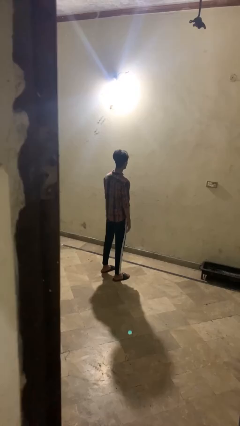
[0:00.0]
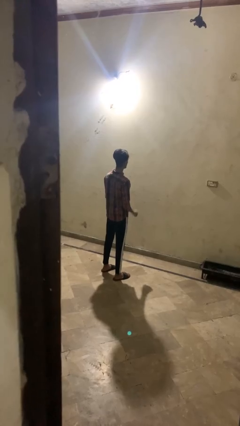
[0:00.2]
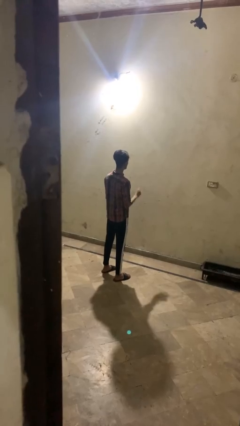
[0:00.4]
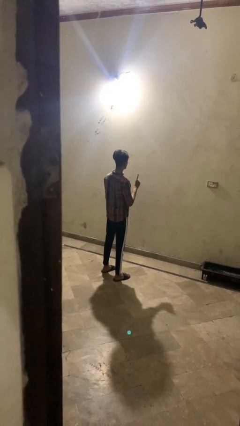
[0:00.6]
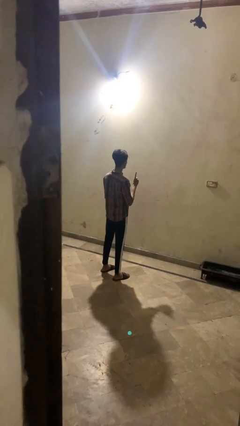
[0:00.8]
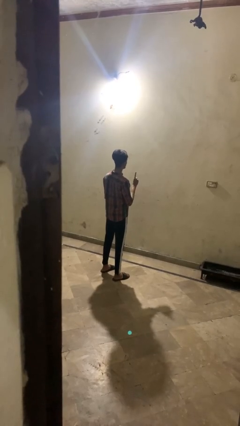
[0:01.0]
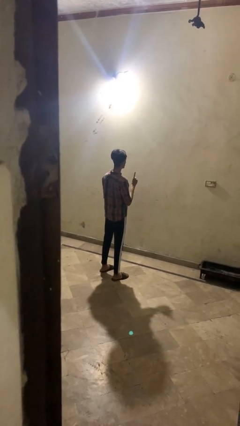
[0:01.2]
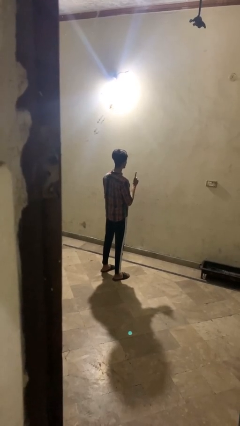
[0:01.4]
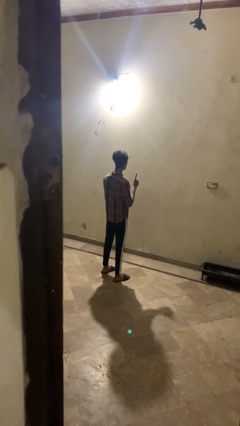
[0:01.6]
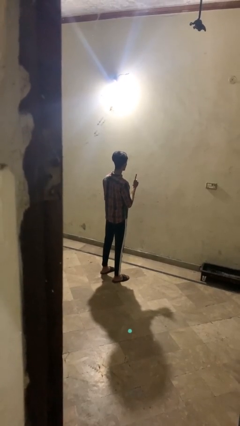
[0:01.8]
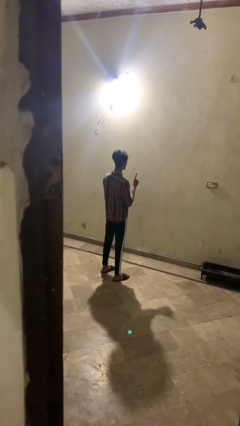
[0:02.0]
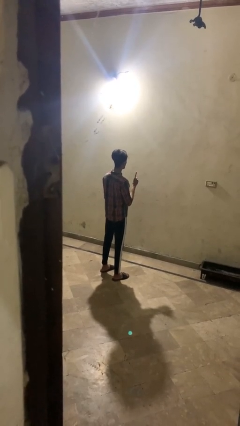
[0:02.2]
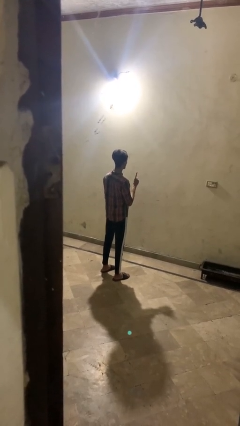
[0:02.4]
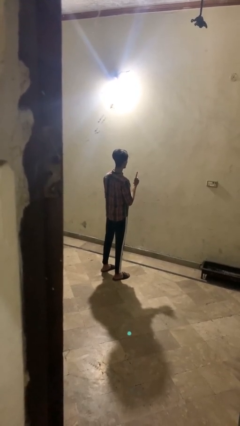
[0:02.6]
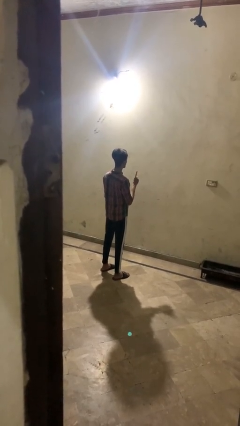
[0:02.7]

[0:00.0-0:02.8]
person gestures number one

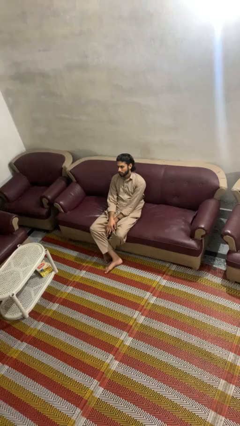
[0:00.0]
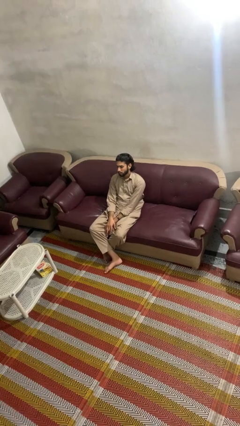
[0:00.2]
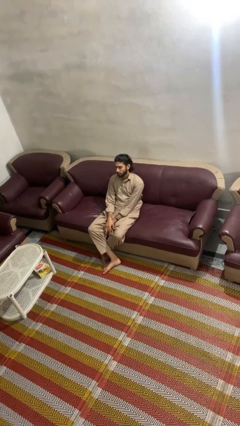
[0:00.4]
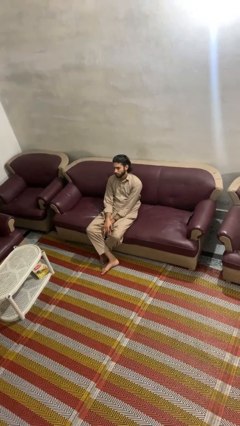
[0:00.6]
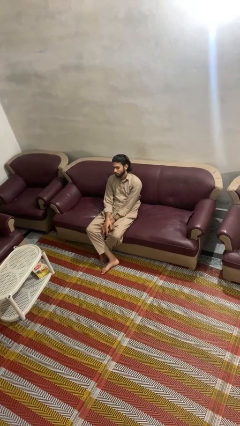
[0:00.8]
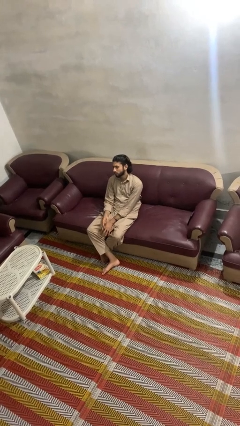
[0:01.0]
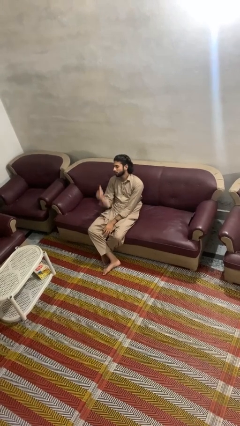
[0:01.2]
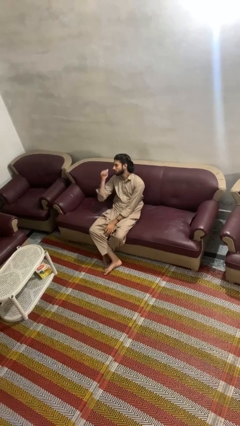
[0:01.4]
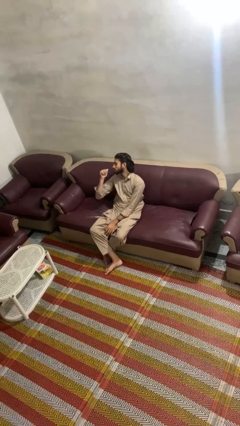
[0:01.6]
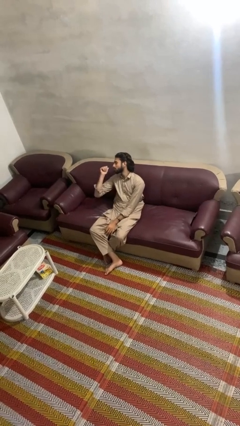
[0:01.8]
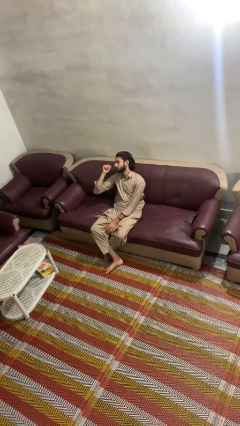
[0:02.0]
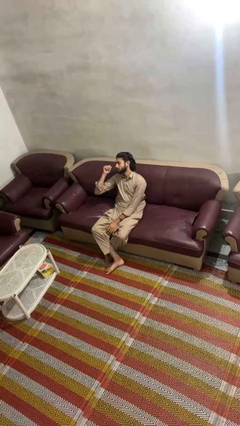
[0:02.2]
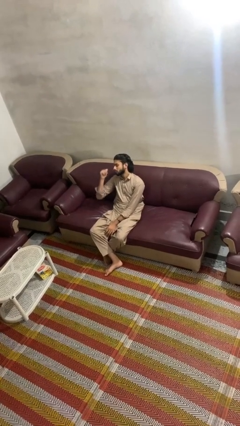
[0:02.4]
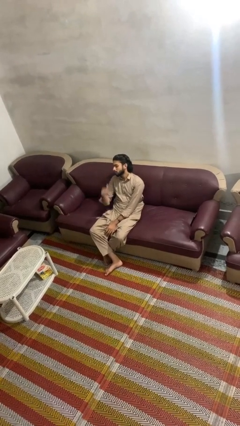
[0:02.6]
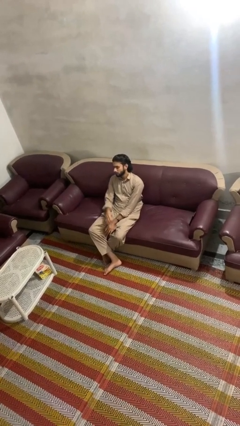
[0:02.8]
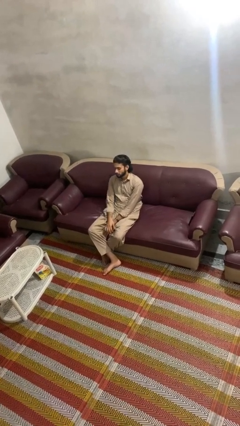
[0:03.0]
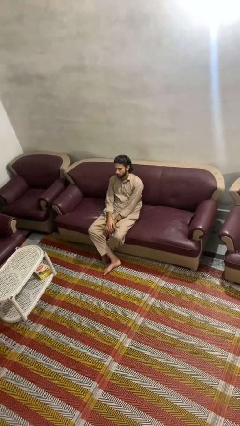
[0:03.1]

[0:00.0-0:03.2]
person gestures behind me

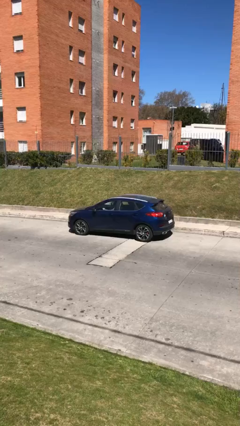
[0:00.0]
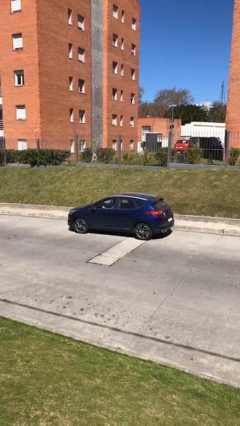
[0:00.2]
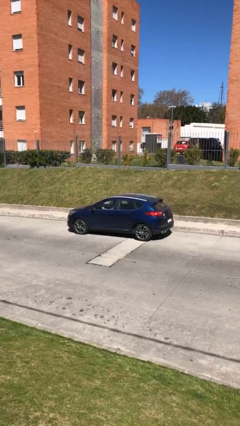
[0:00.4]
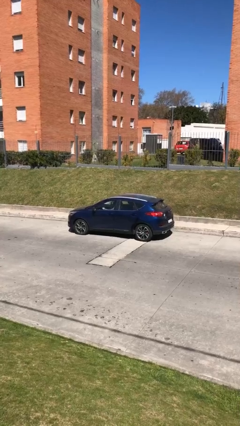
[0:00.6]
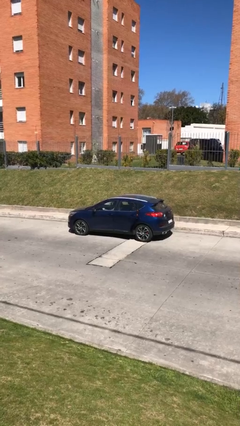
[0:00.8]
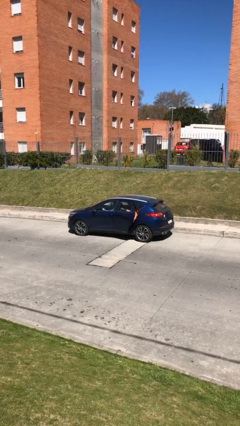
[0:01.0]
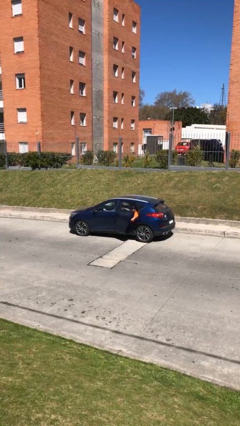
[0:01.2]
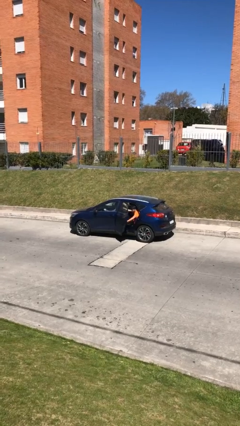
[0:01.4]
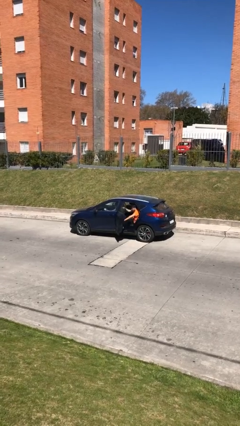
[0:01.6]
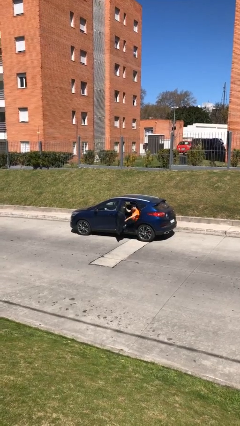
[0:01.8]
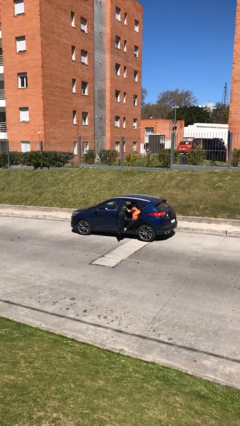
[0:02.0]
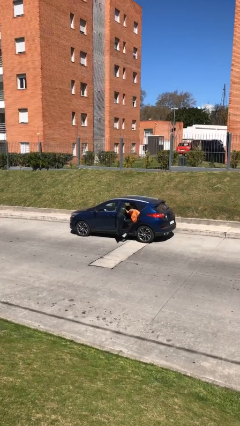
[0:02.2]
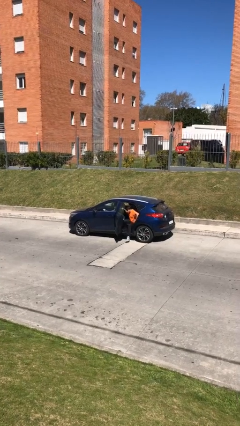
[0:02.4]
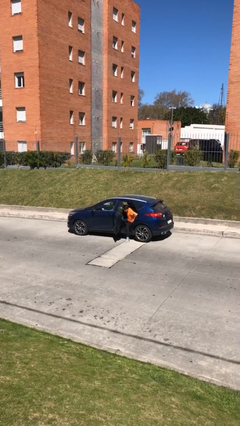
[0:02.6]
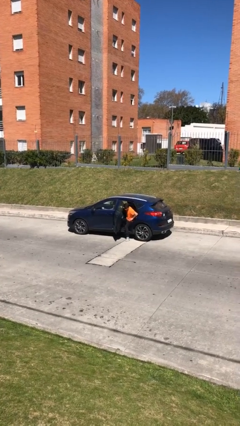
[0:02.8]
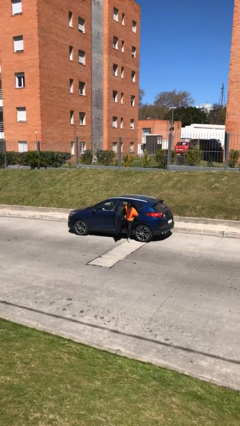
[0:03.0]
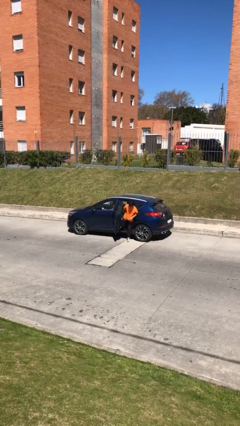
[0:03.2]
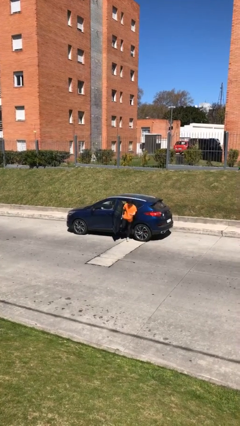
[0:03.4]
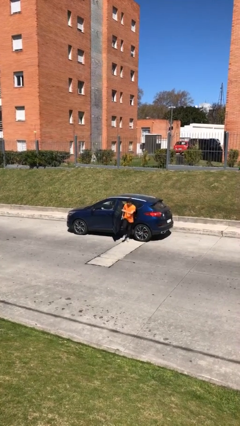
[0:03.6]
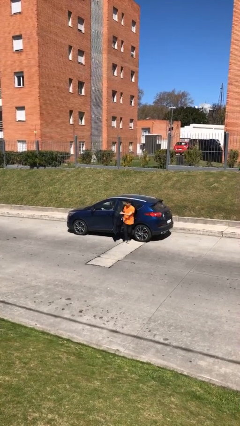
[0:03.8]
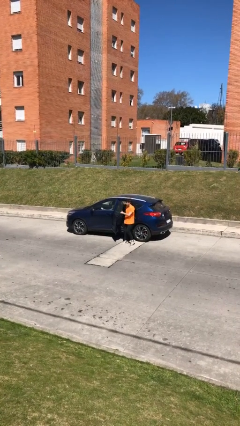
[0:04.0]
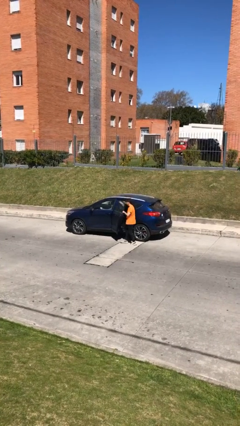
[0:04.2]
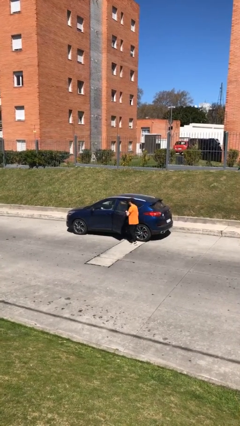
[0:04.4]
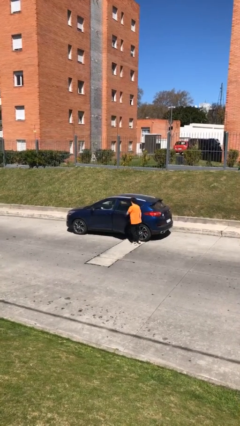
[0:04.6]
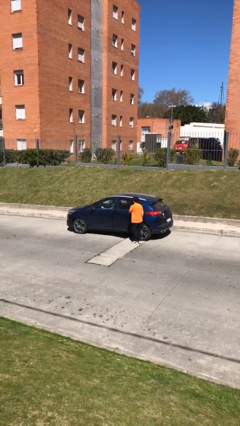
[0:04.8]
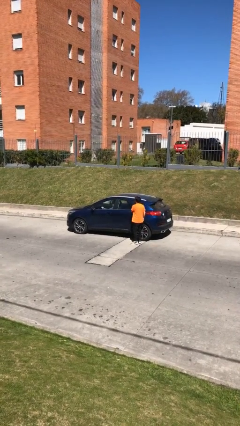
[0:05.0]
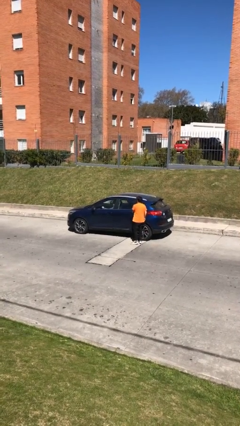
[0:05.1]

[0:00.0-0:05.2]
car drops off person

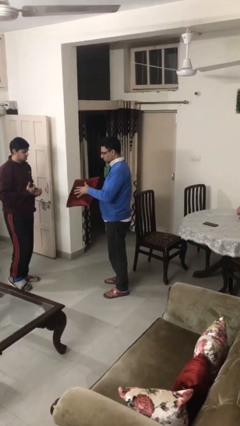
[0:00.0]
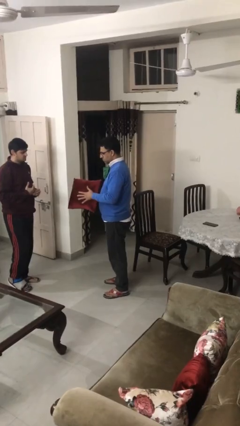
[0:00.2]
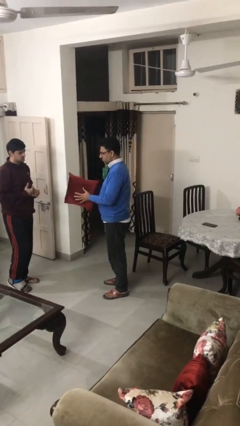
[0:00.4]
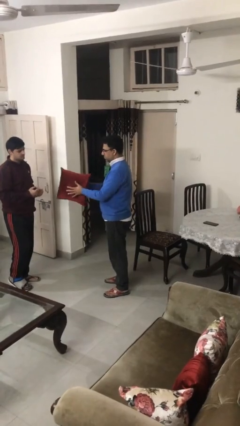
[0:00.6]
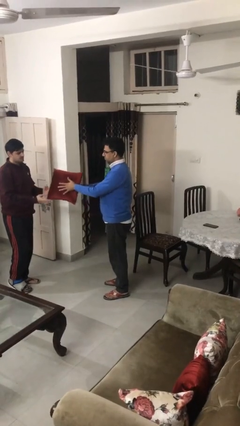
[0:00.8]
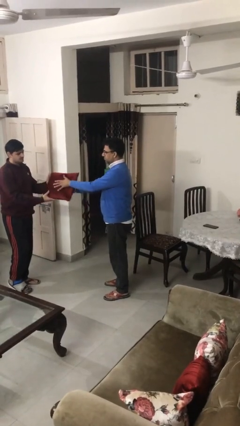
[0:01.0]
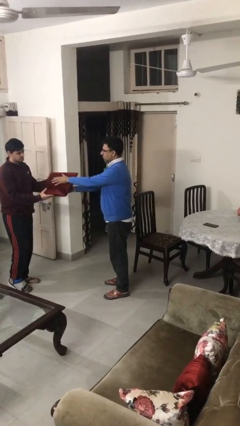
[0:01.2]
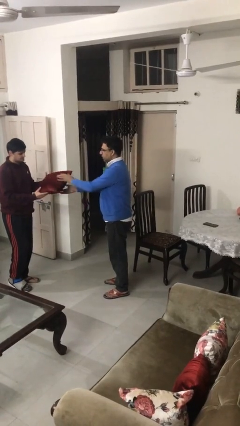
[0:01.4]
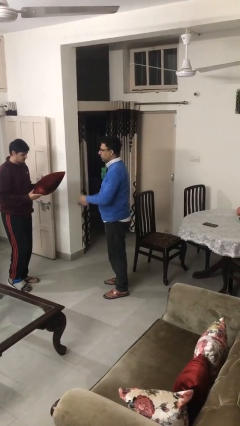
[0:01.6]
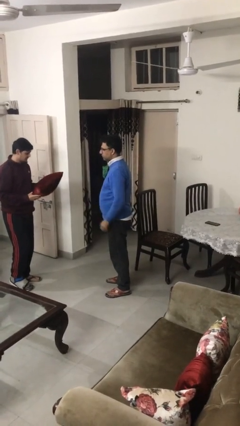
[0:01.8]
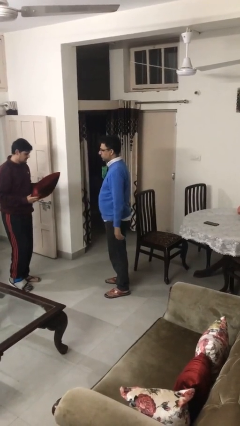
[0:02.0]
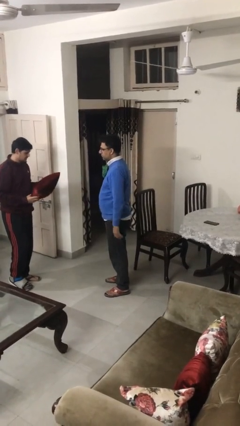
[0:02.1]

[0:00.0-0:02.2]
person transfers object to person

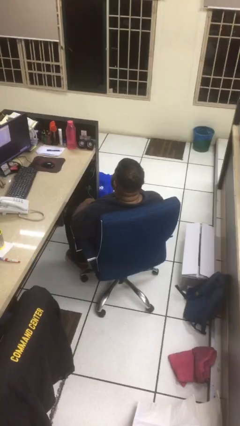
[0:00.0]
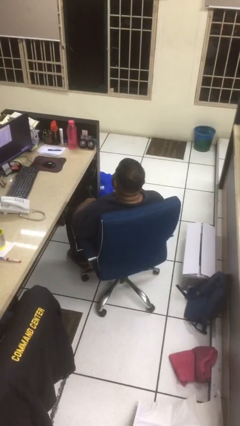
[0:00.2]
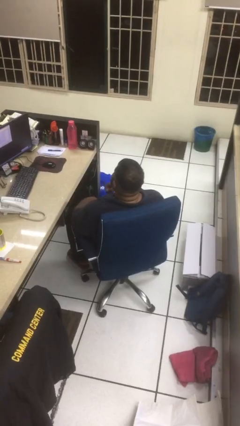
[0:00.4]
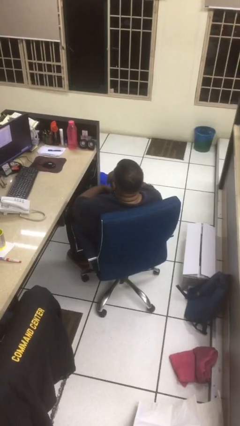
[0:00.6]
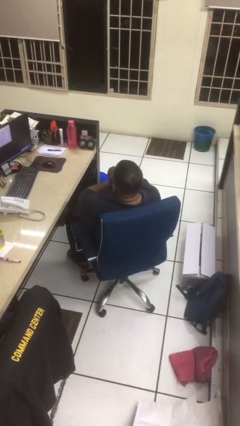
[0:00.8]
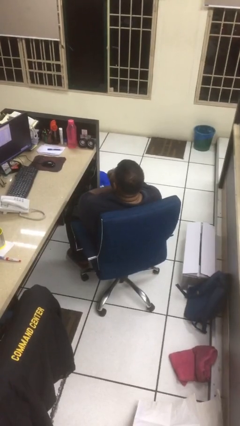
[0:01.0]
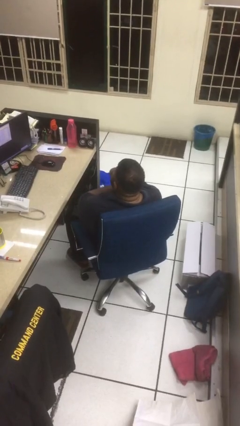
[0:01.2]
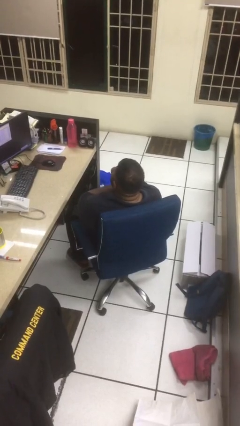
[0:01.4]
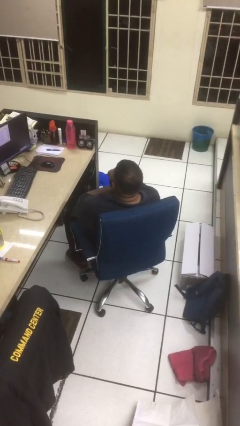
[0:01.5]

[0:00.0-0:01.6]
person strokes chin

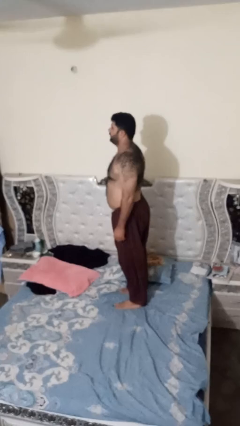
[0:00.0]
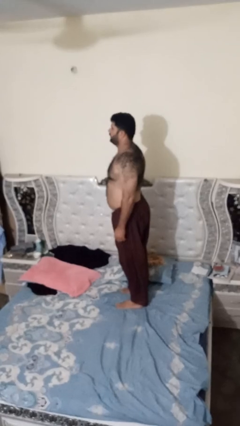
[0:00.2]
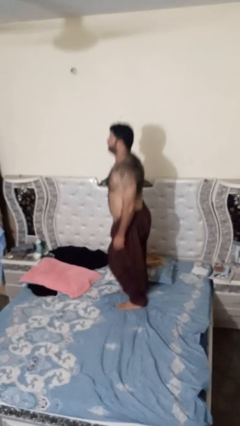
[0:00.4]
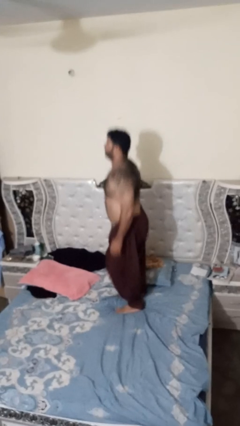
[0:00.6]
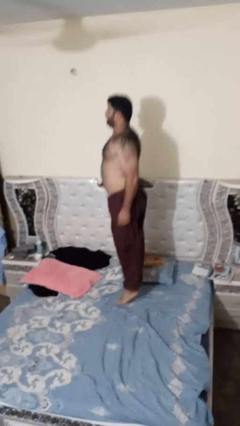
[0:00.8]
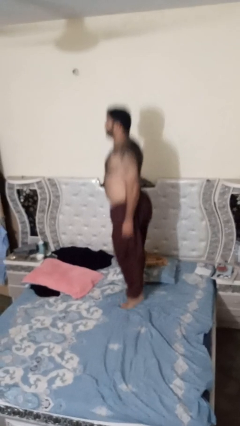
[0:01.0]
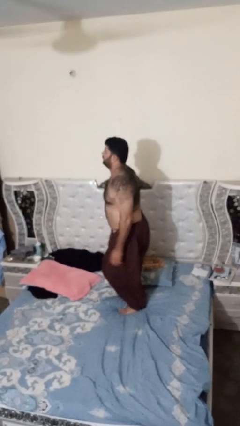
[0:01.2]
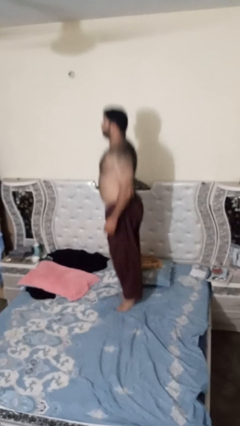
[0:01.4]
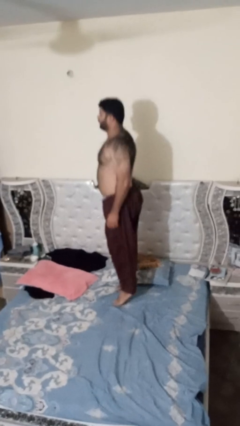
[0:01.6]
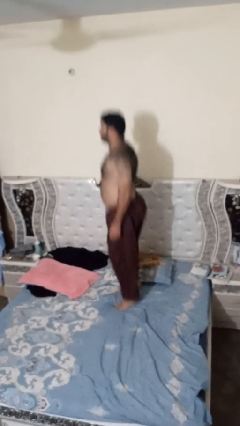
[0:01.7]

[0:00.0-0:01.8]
person jumps on bed

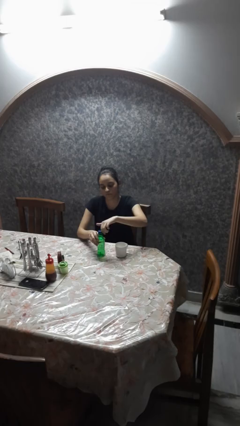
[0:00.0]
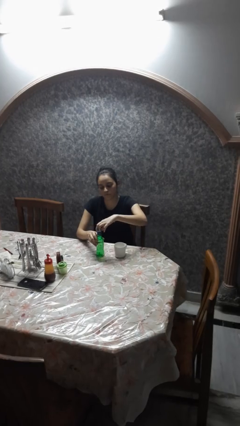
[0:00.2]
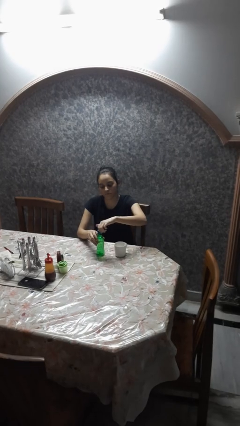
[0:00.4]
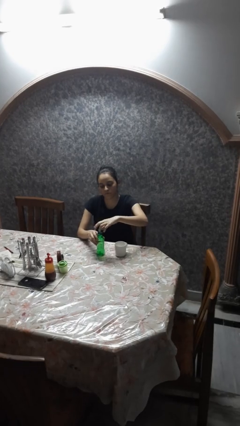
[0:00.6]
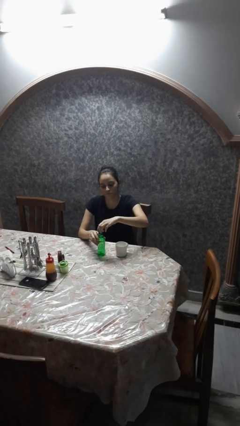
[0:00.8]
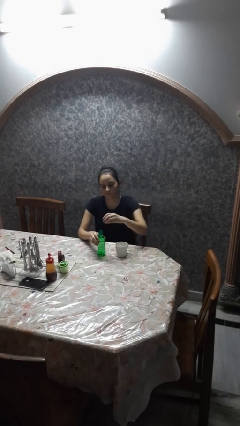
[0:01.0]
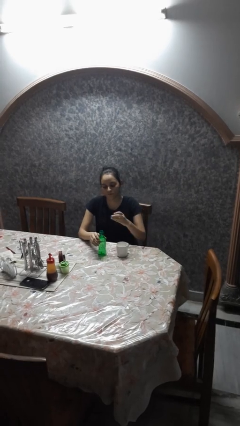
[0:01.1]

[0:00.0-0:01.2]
person unscrews lid from bottle
